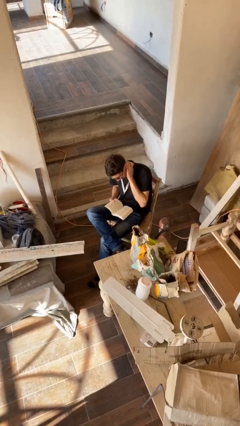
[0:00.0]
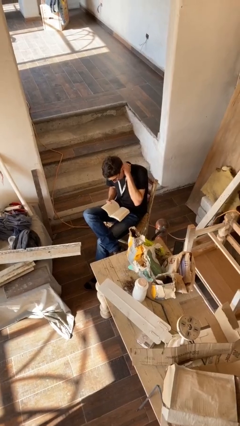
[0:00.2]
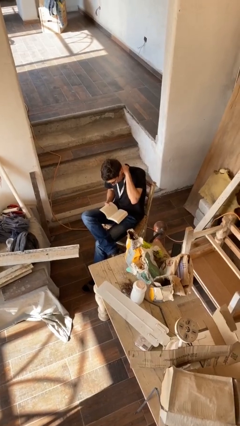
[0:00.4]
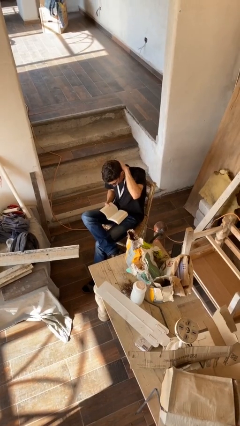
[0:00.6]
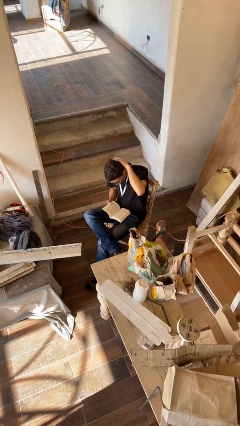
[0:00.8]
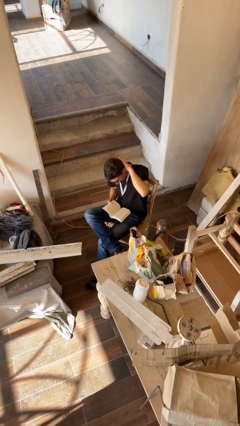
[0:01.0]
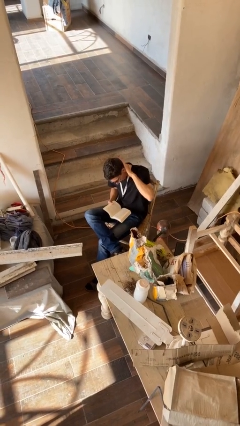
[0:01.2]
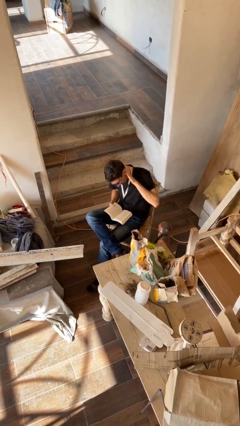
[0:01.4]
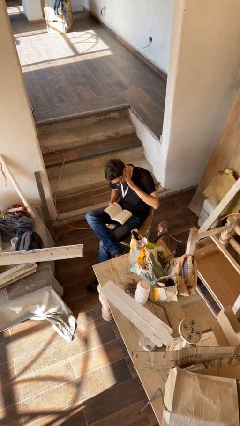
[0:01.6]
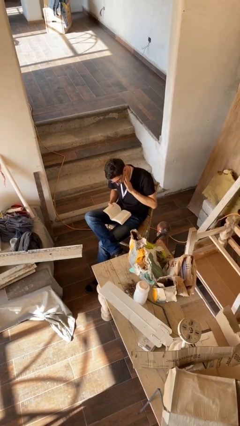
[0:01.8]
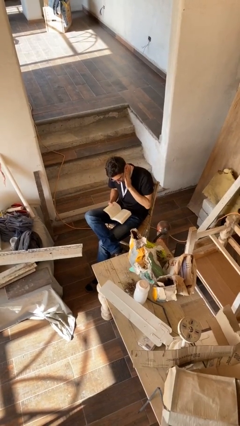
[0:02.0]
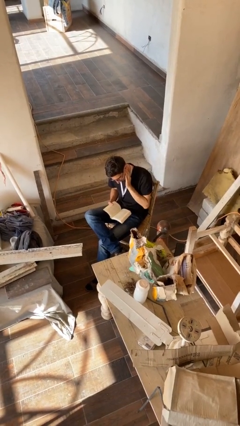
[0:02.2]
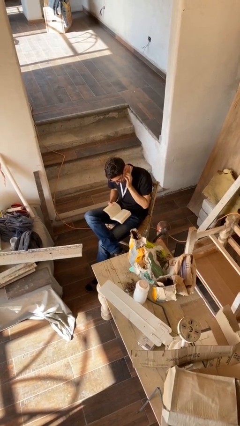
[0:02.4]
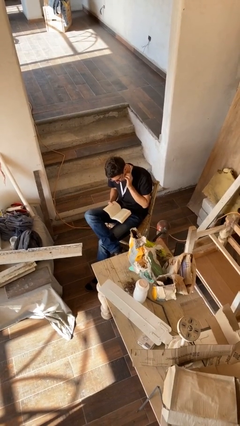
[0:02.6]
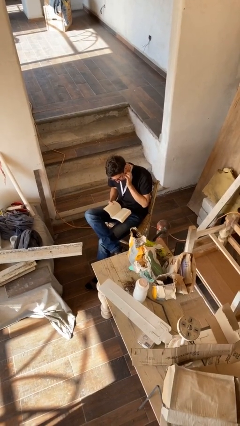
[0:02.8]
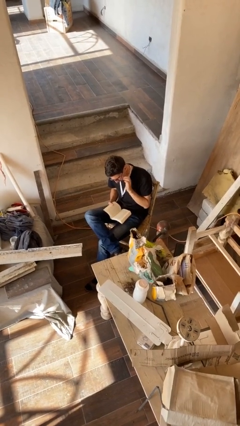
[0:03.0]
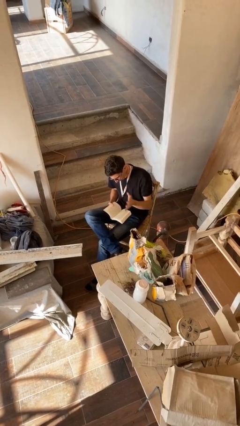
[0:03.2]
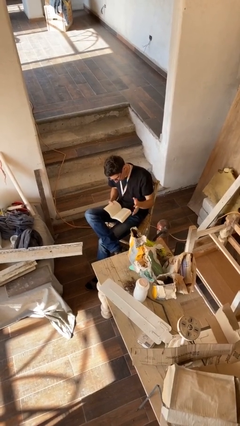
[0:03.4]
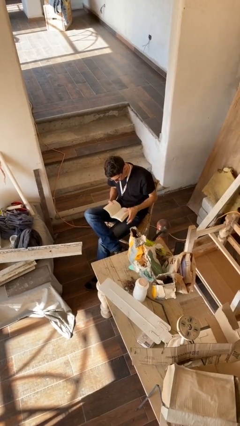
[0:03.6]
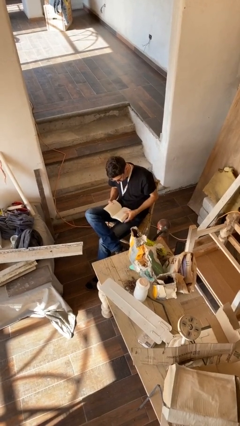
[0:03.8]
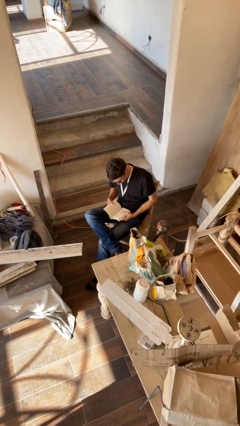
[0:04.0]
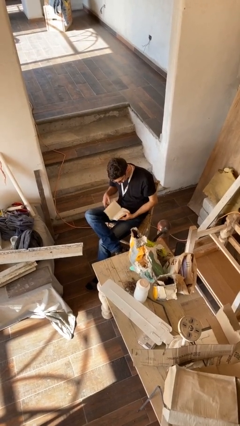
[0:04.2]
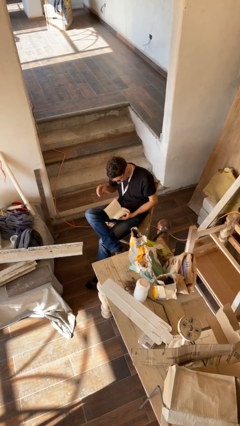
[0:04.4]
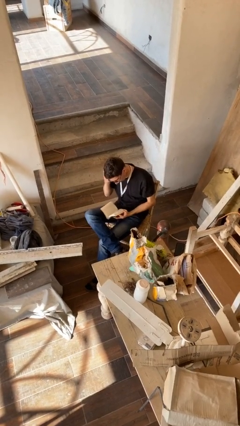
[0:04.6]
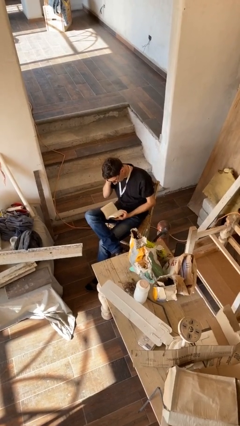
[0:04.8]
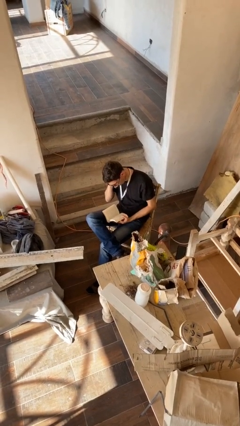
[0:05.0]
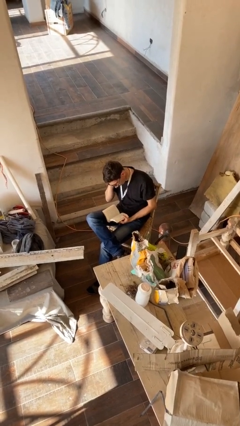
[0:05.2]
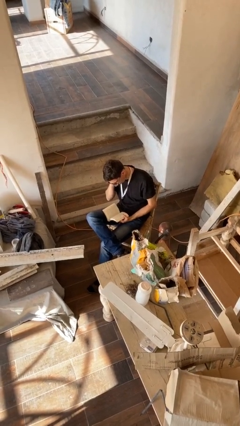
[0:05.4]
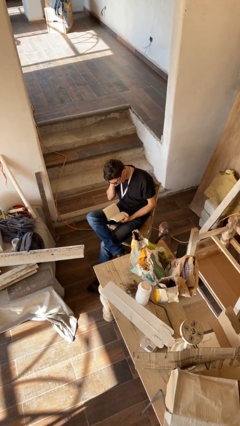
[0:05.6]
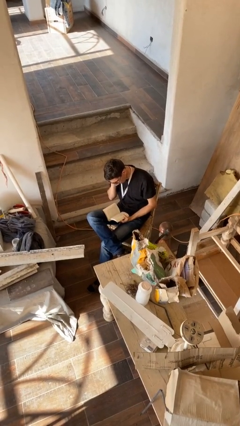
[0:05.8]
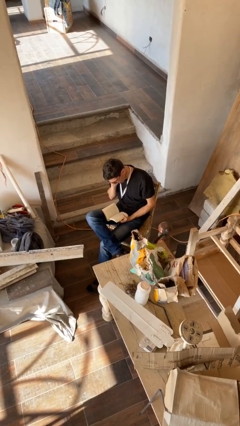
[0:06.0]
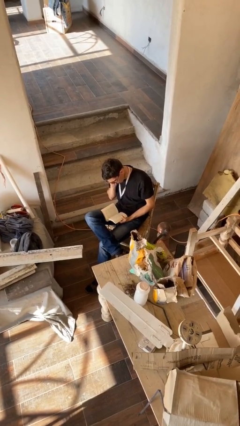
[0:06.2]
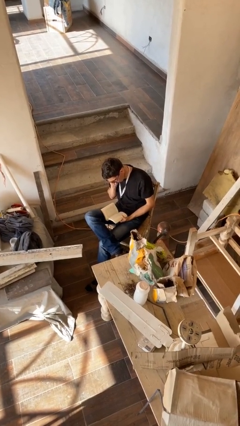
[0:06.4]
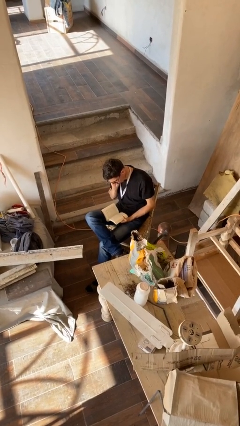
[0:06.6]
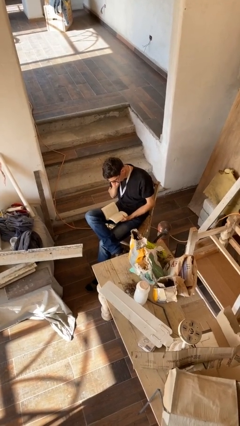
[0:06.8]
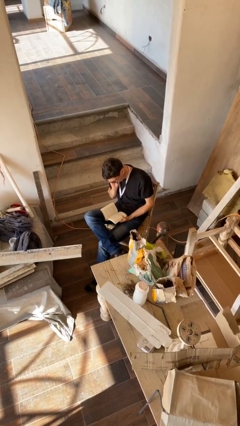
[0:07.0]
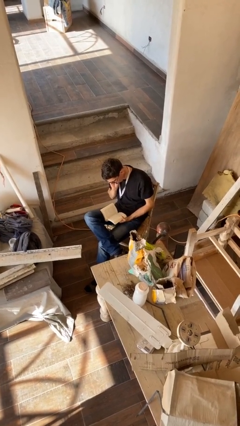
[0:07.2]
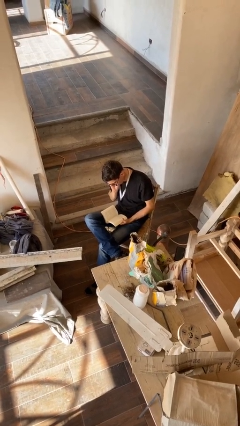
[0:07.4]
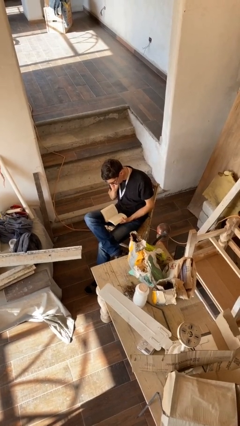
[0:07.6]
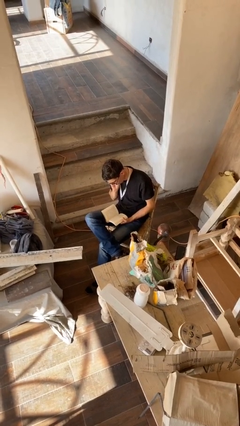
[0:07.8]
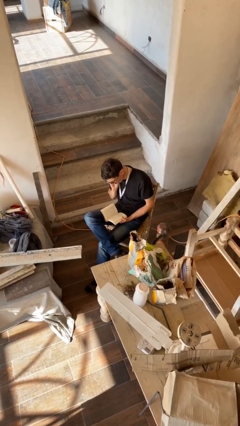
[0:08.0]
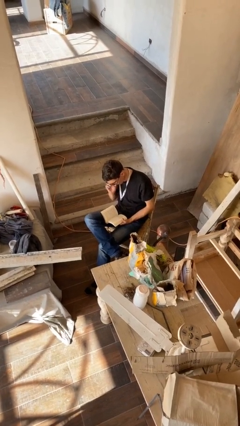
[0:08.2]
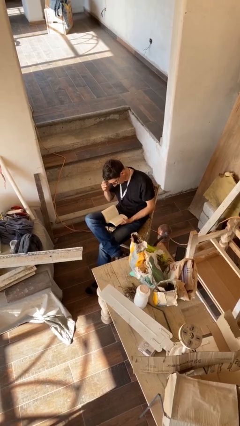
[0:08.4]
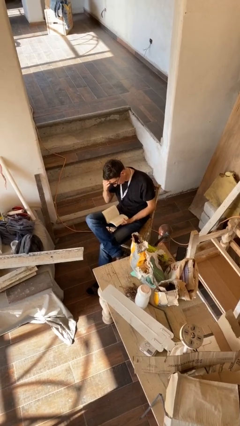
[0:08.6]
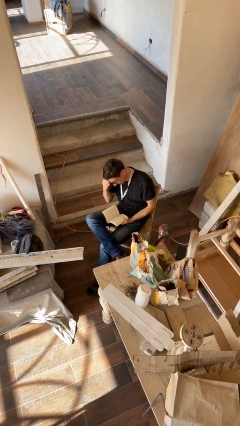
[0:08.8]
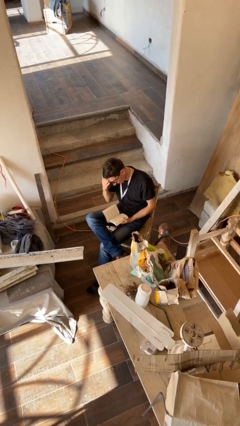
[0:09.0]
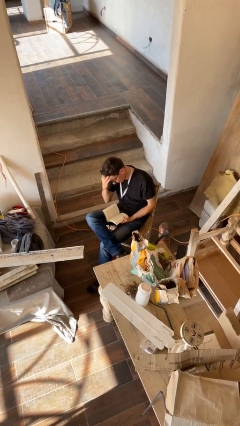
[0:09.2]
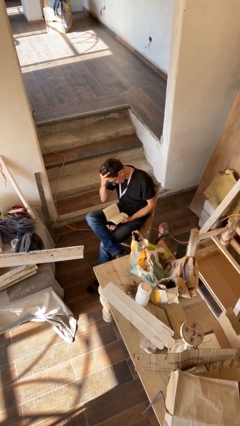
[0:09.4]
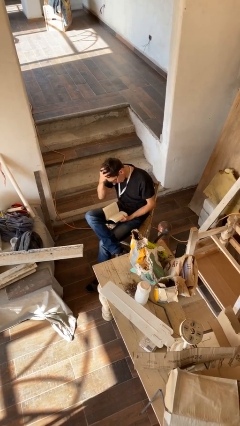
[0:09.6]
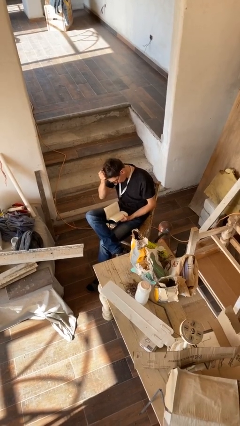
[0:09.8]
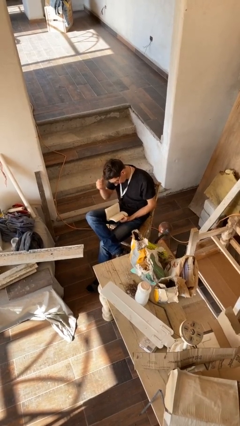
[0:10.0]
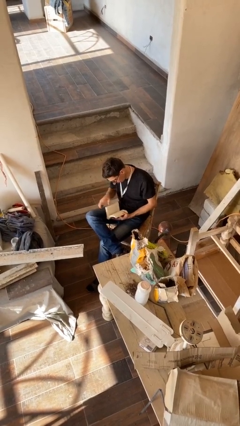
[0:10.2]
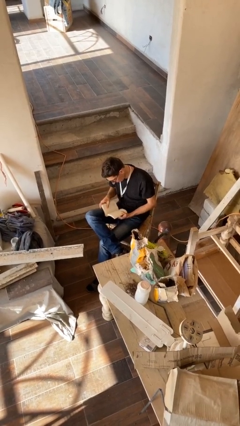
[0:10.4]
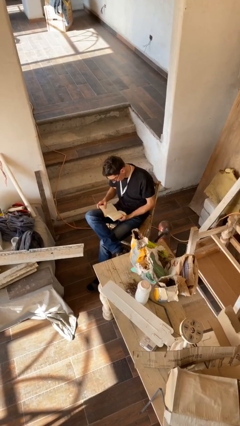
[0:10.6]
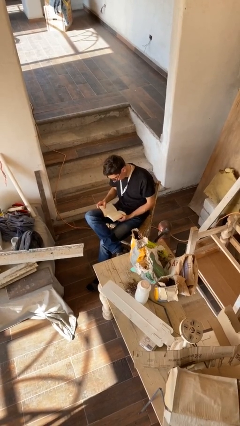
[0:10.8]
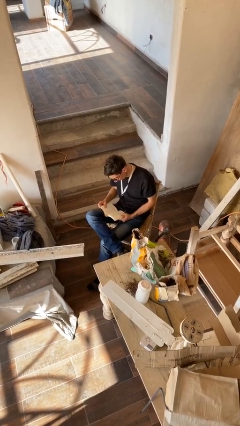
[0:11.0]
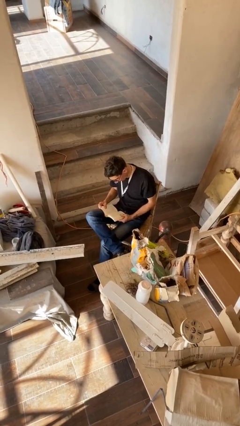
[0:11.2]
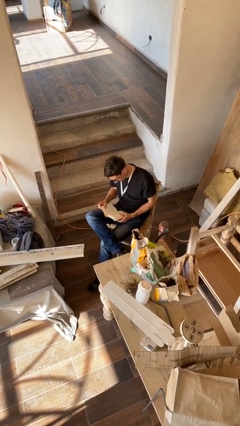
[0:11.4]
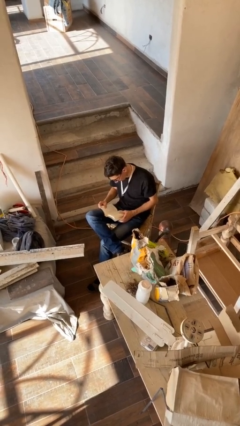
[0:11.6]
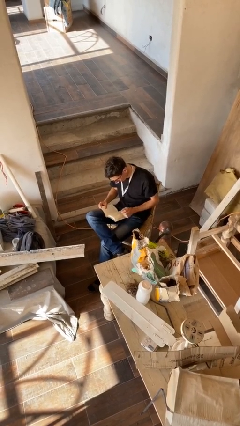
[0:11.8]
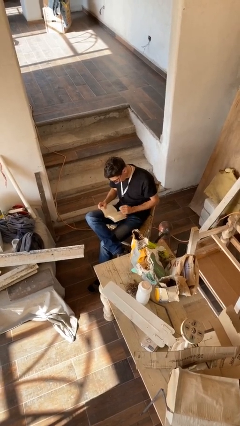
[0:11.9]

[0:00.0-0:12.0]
person reads document

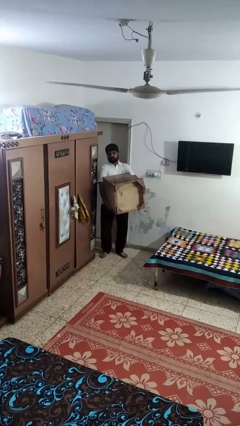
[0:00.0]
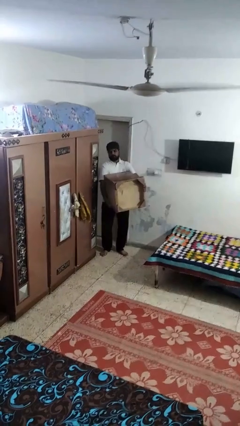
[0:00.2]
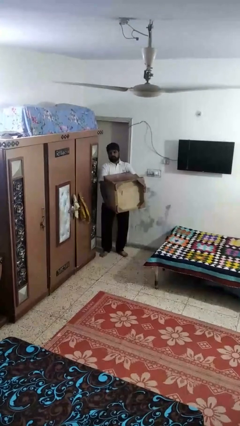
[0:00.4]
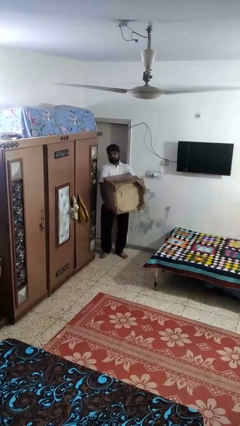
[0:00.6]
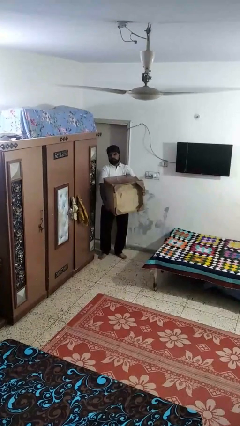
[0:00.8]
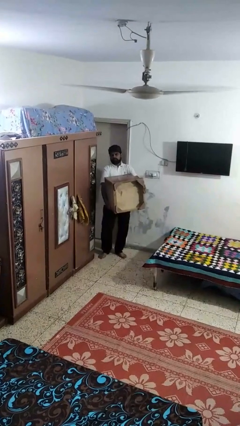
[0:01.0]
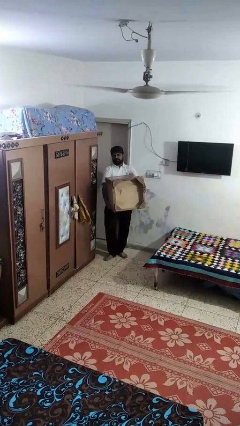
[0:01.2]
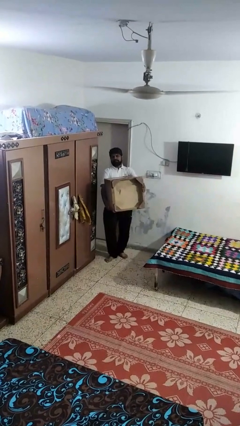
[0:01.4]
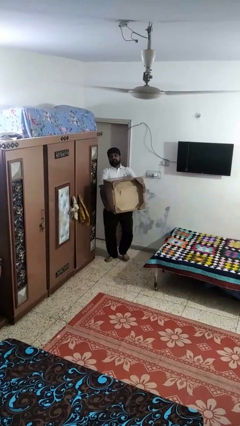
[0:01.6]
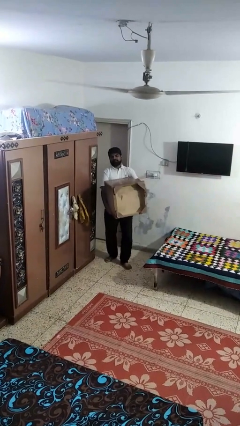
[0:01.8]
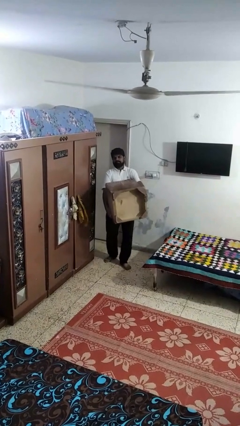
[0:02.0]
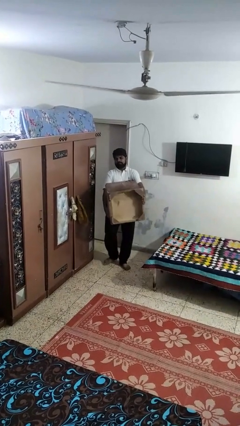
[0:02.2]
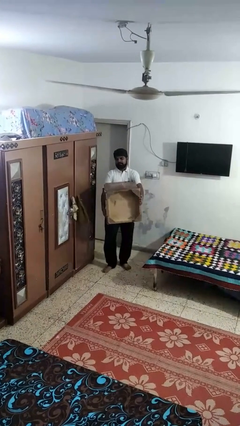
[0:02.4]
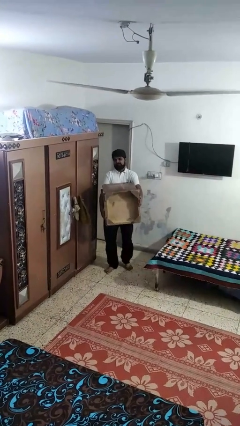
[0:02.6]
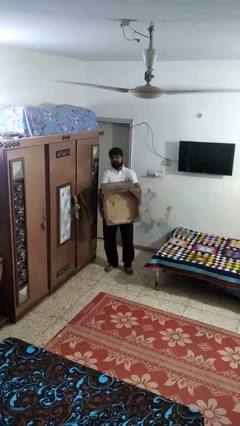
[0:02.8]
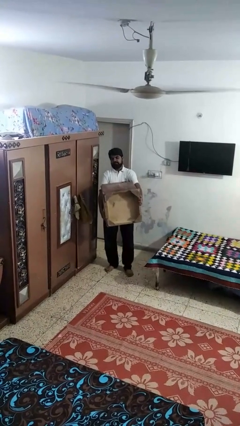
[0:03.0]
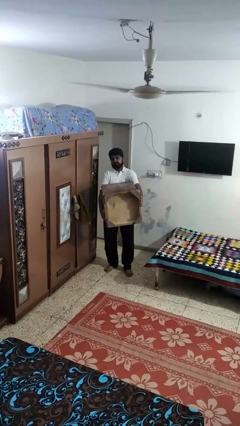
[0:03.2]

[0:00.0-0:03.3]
person carries furniture

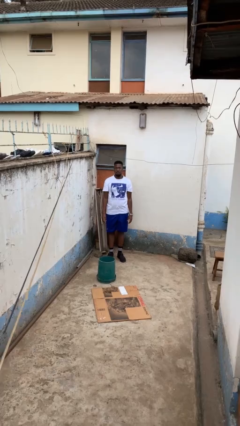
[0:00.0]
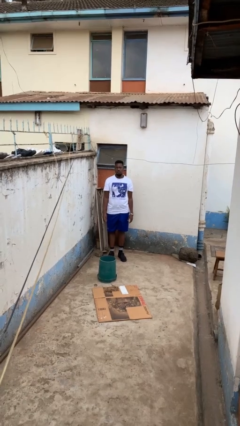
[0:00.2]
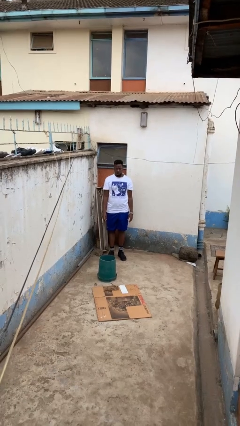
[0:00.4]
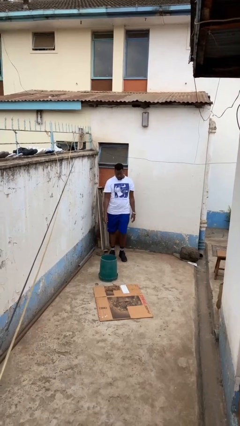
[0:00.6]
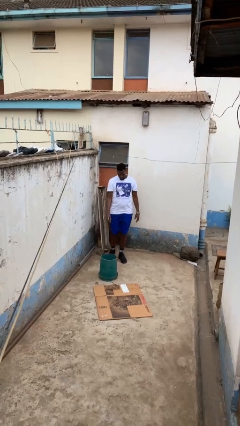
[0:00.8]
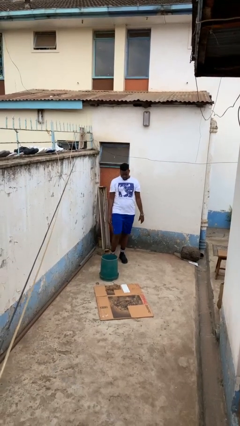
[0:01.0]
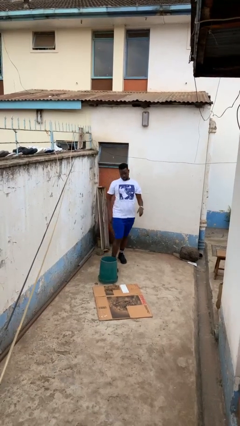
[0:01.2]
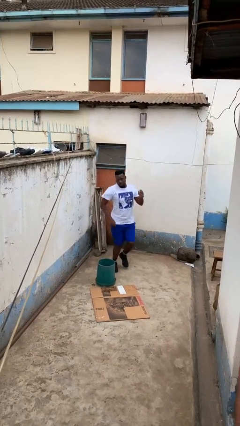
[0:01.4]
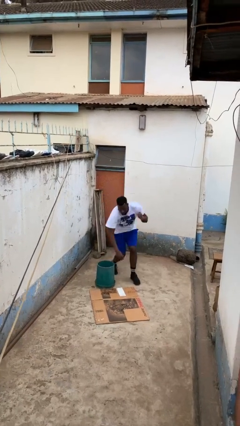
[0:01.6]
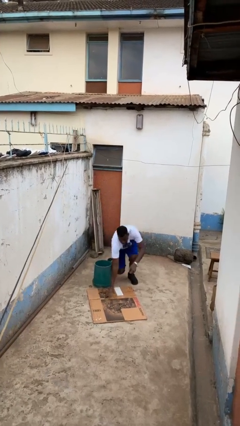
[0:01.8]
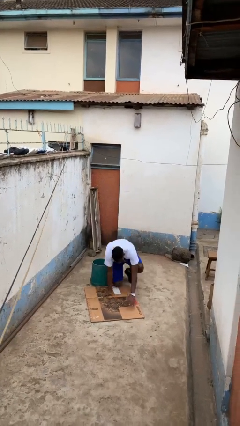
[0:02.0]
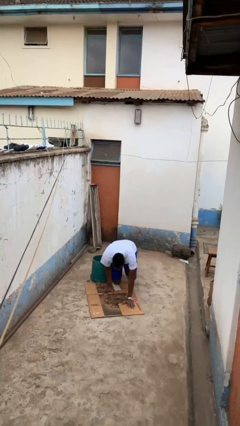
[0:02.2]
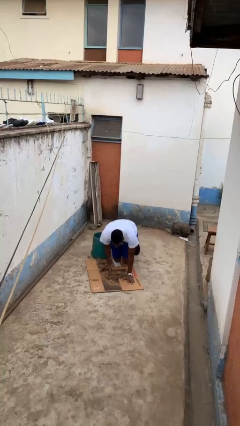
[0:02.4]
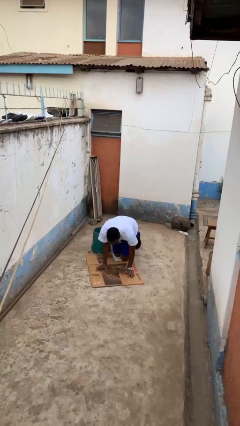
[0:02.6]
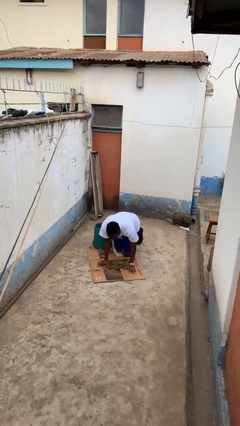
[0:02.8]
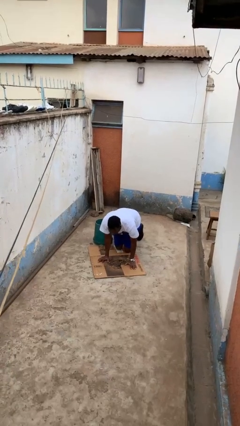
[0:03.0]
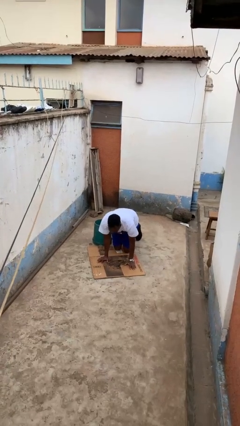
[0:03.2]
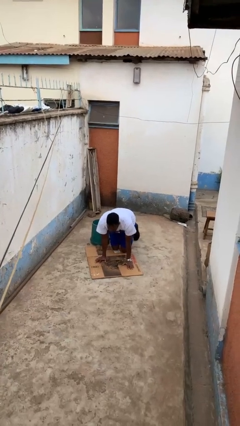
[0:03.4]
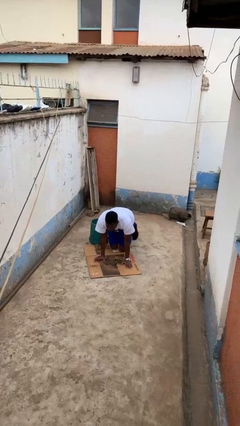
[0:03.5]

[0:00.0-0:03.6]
person trips on object on floor
